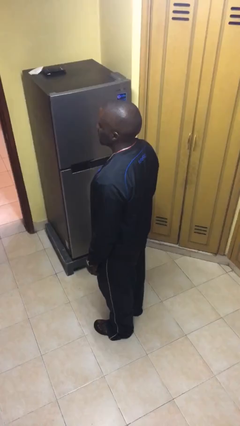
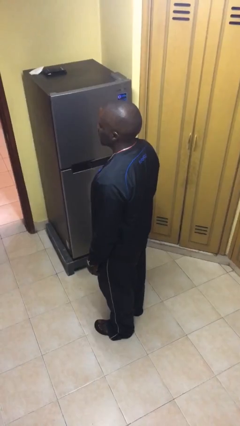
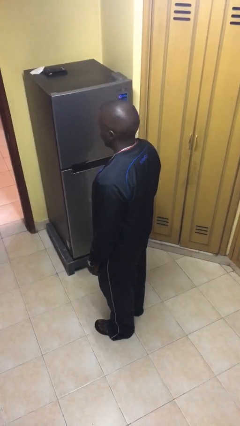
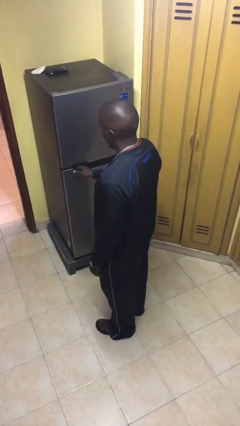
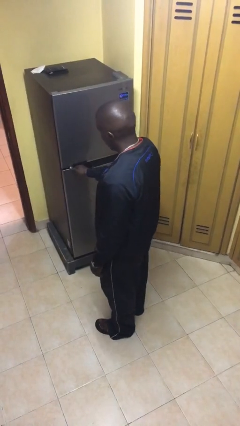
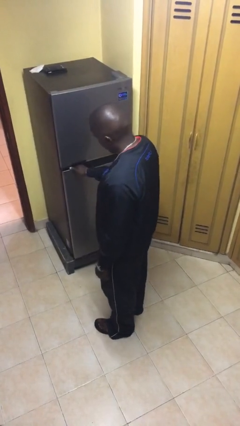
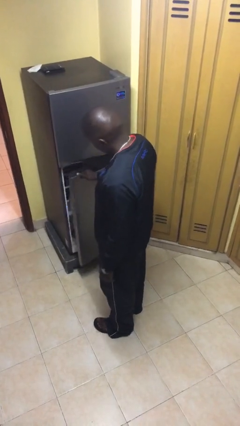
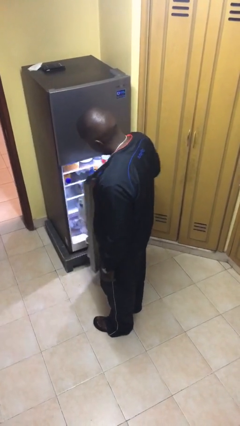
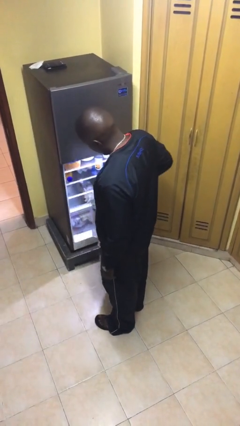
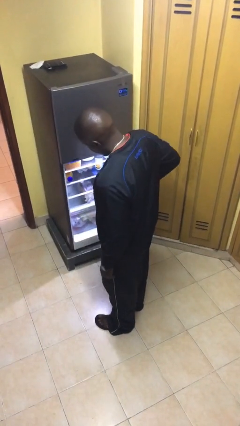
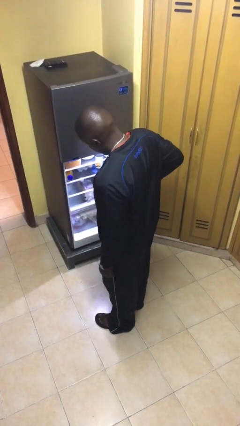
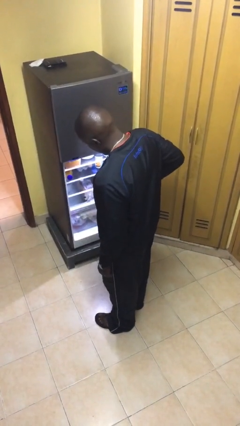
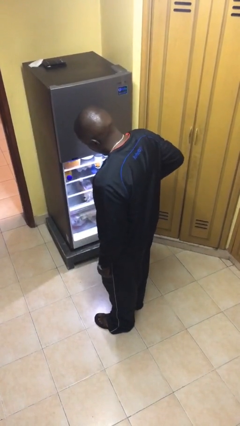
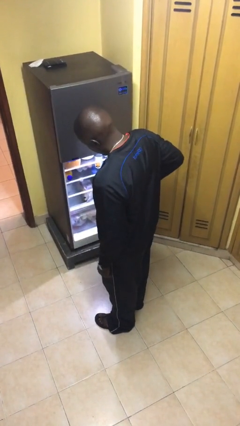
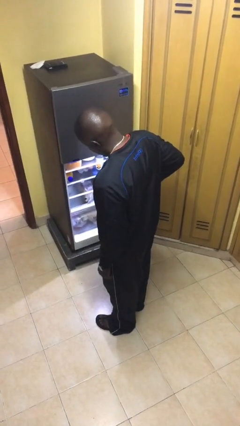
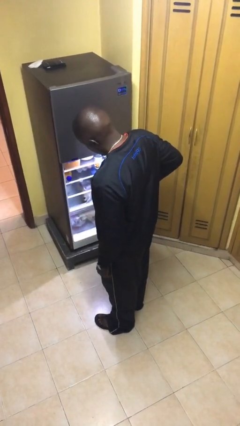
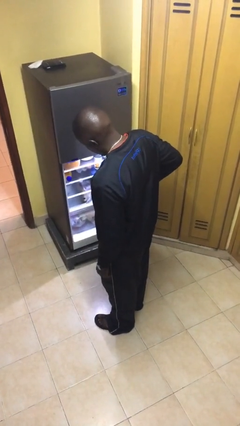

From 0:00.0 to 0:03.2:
person opens refrigerator

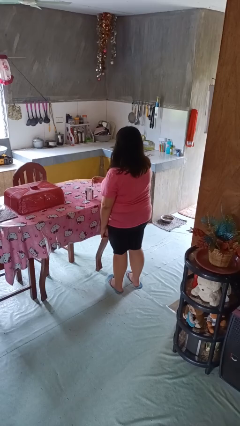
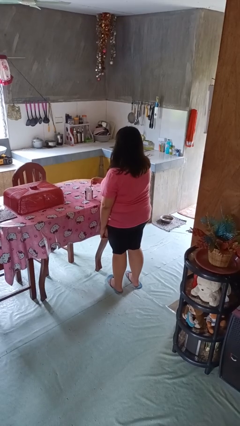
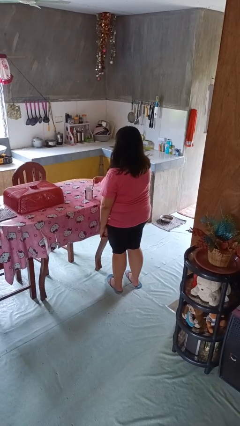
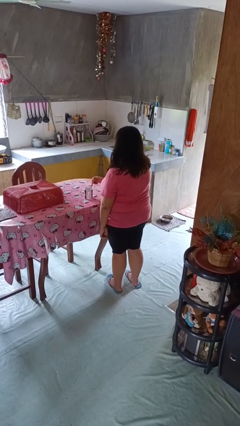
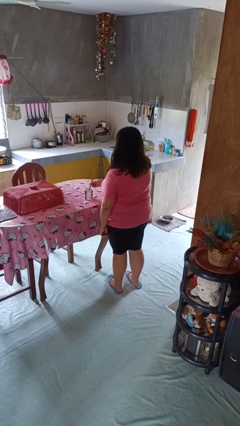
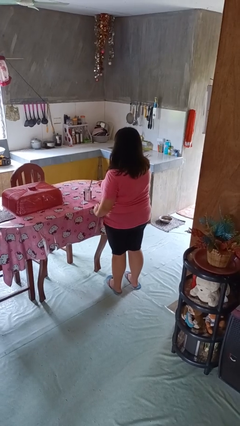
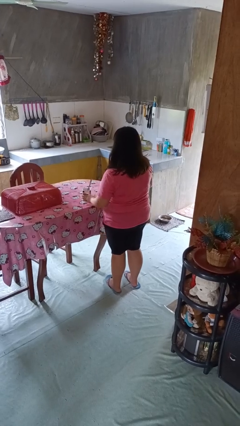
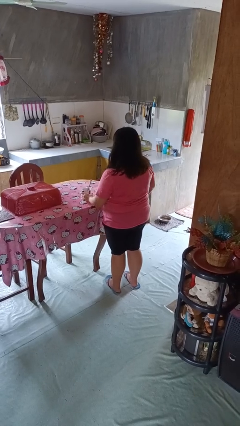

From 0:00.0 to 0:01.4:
person stirs mug

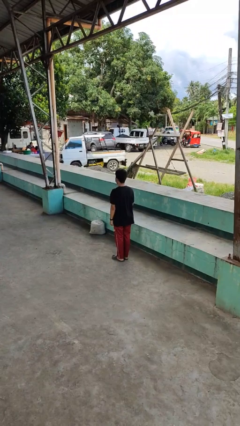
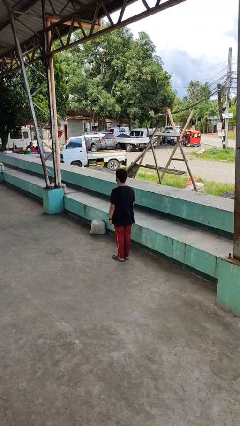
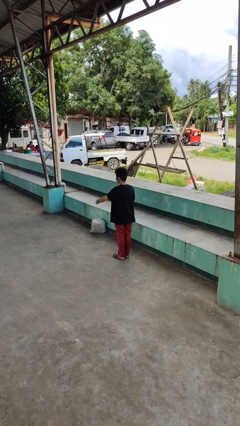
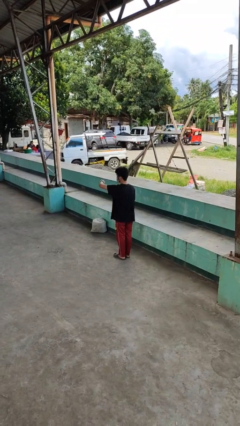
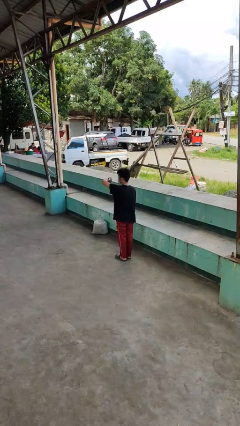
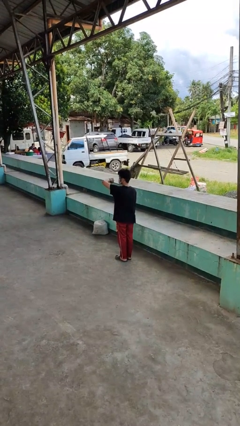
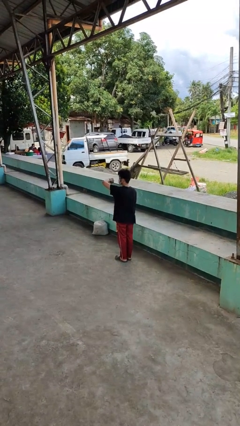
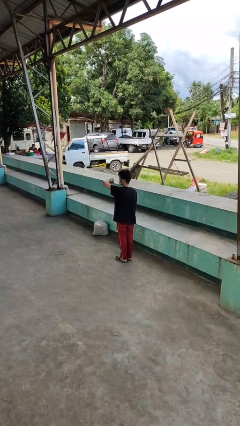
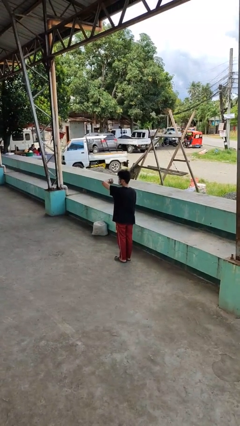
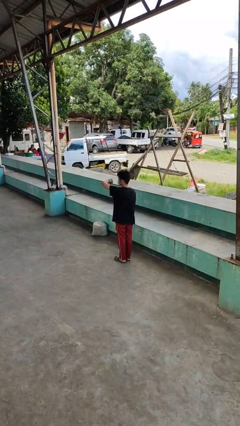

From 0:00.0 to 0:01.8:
person looks at wristwatch

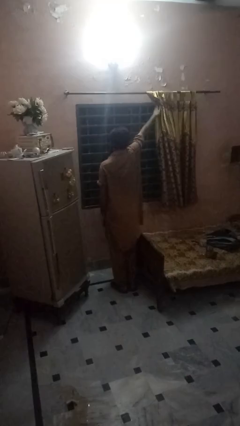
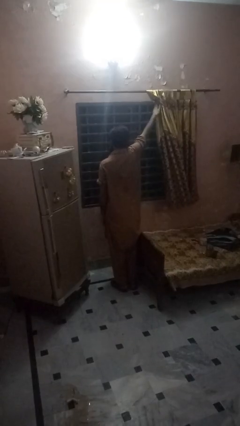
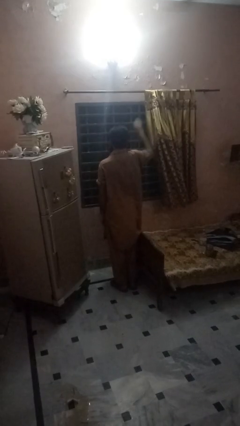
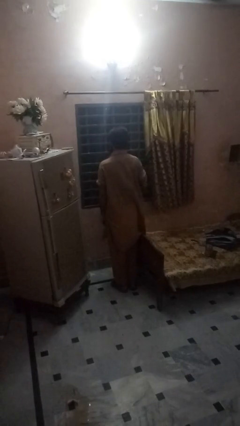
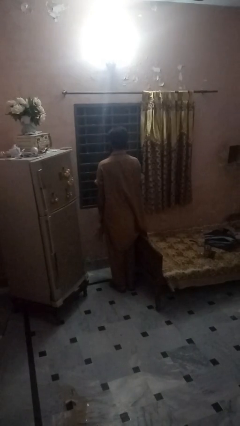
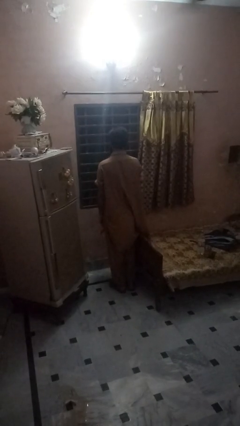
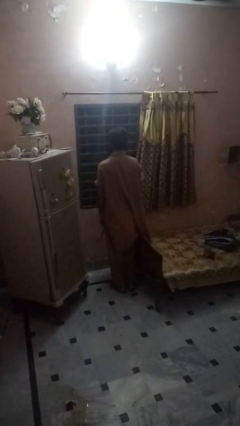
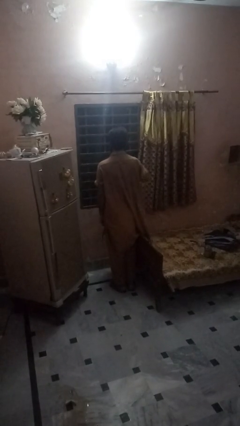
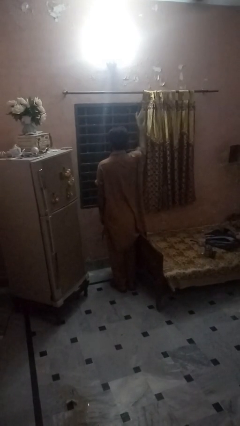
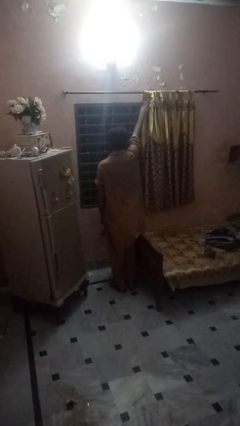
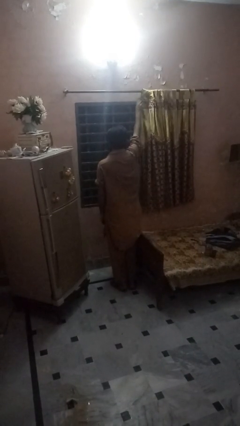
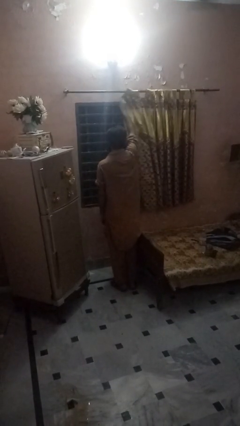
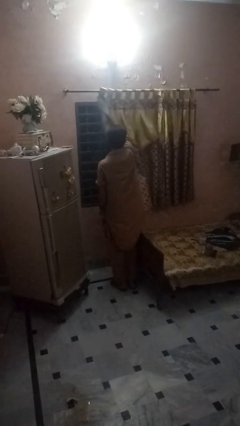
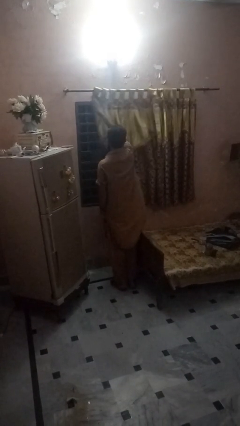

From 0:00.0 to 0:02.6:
person closes curtains

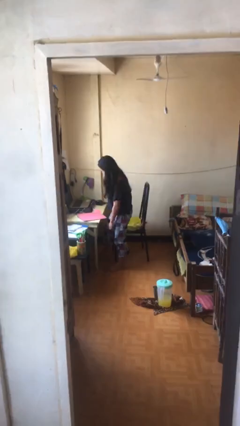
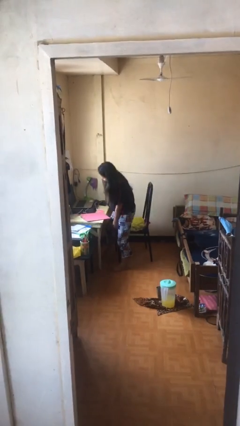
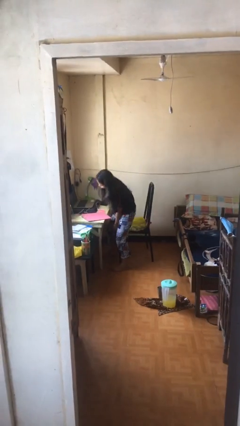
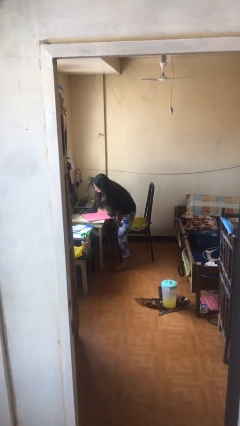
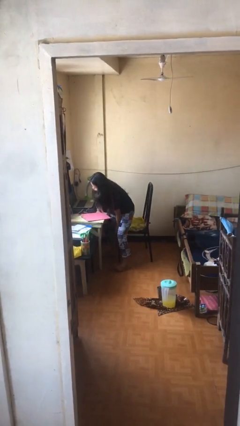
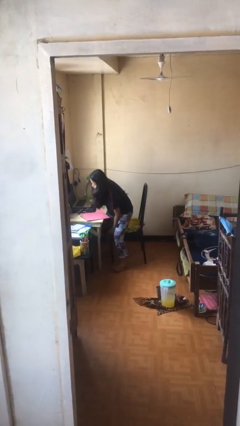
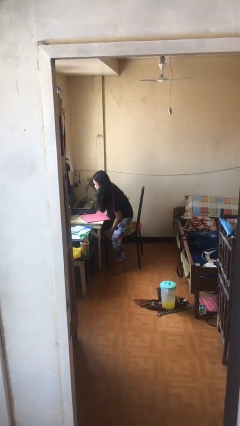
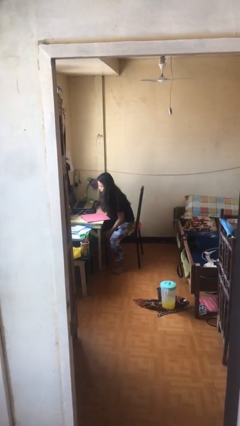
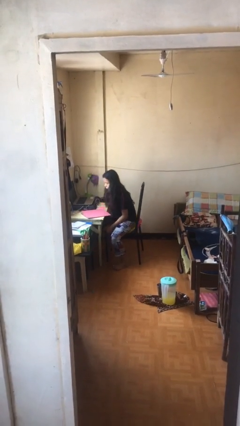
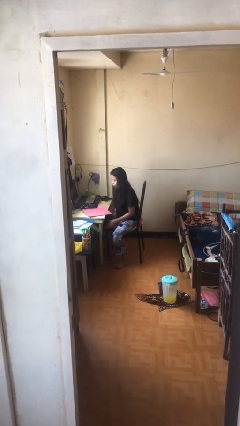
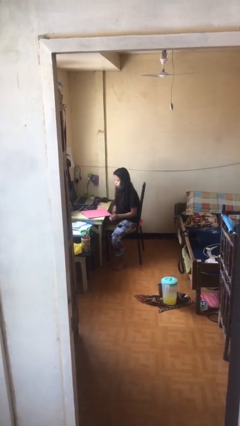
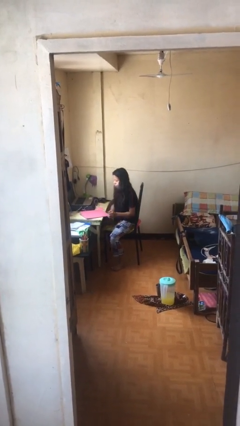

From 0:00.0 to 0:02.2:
person sits down

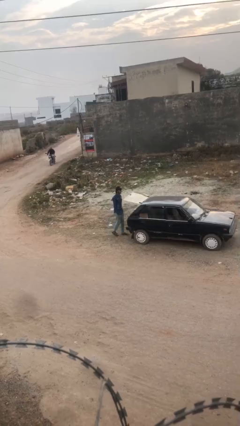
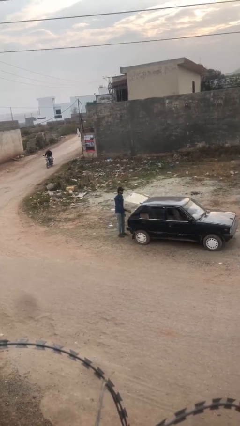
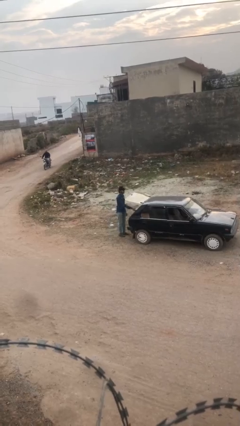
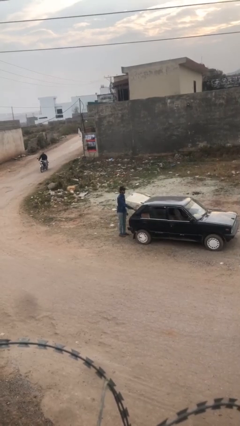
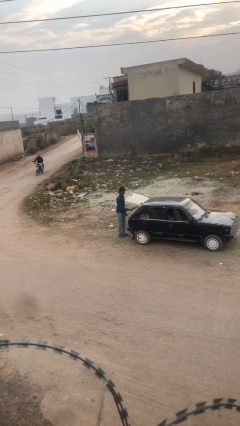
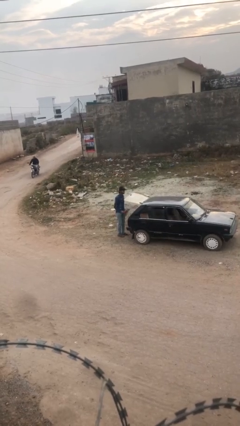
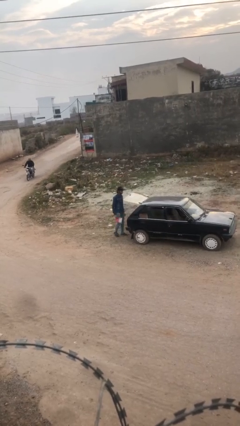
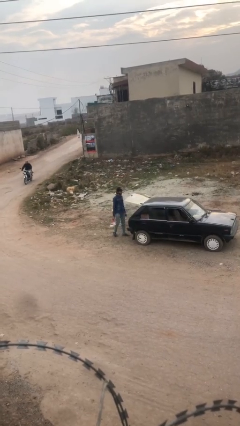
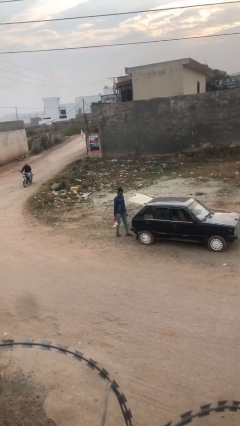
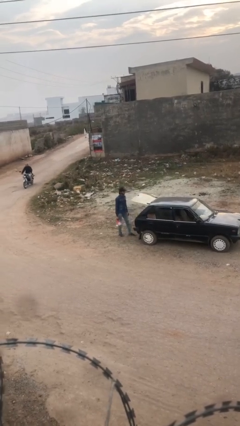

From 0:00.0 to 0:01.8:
person unloads car

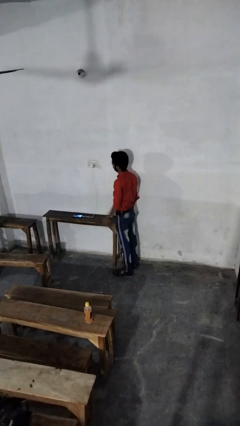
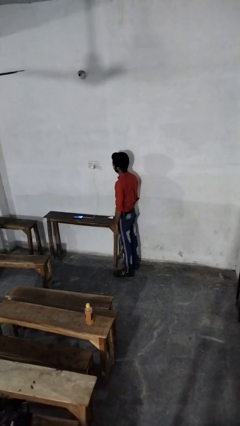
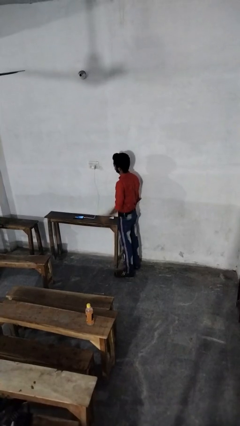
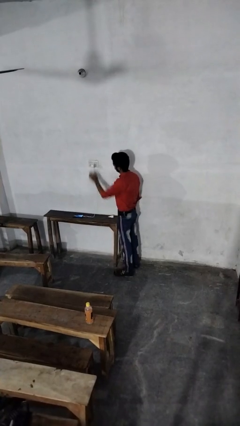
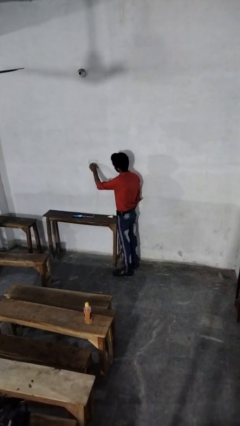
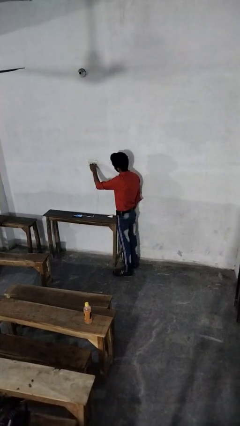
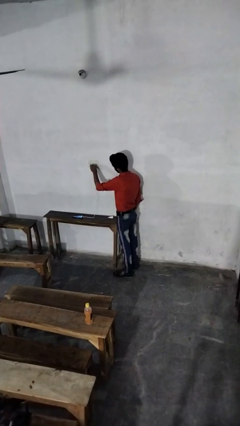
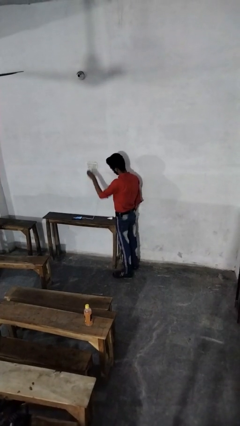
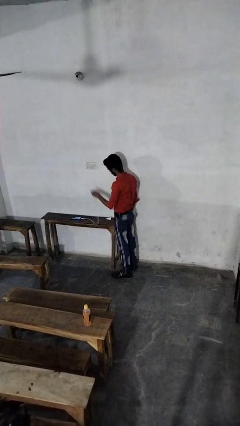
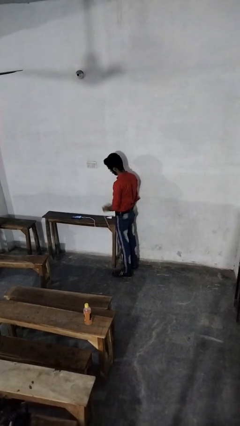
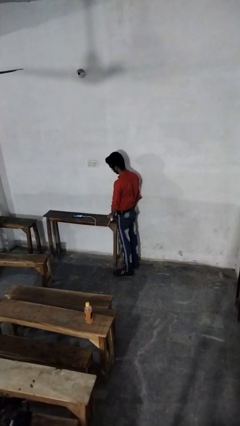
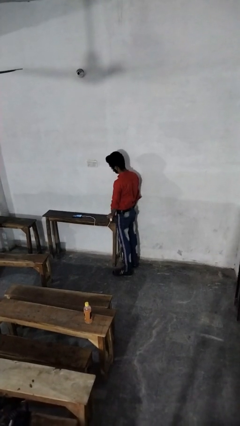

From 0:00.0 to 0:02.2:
person unplugs from electrical socket

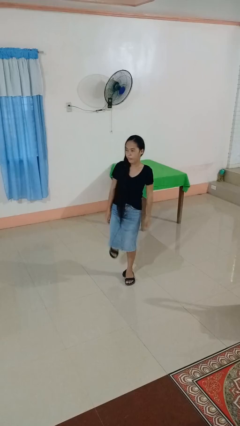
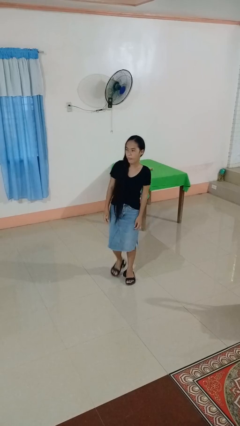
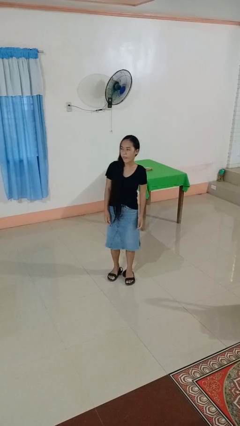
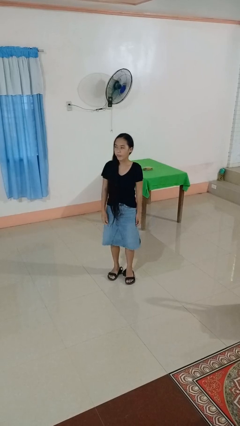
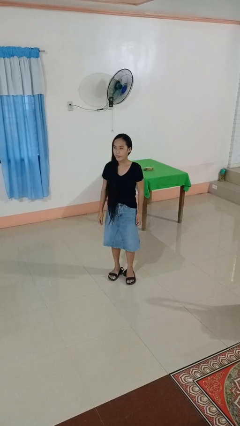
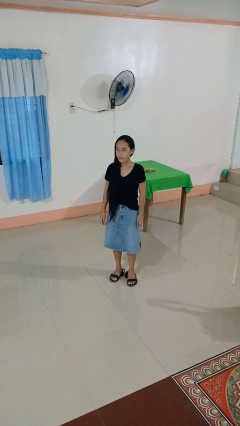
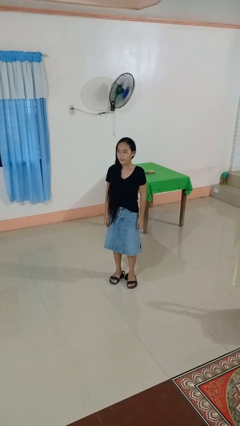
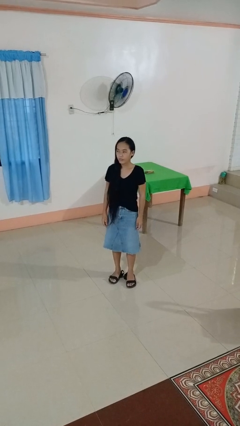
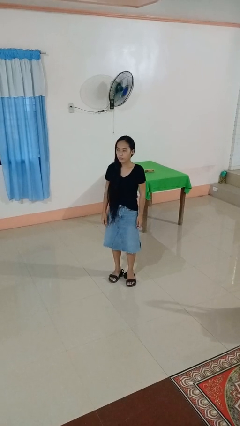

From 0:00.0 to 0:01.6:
person swats bug
